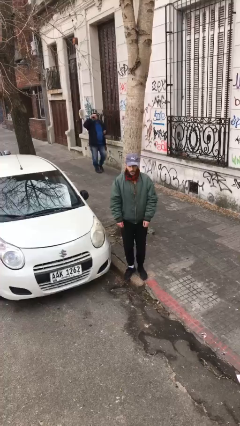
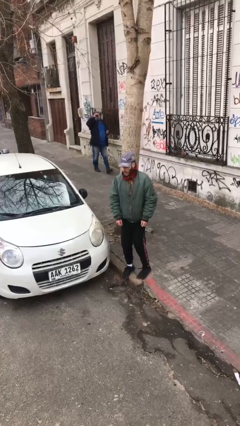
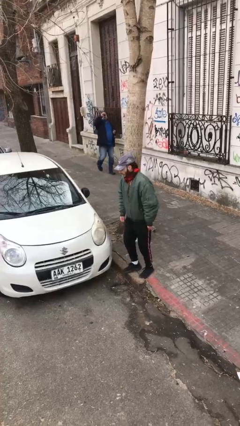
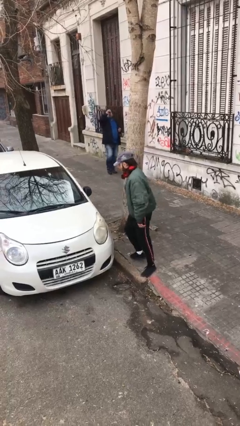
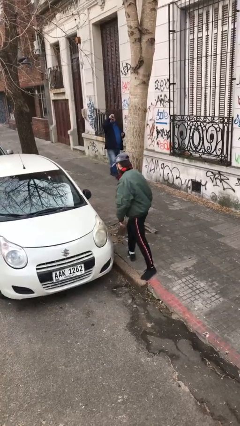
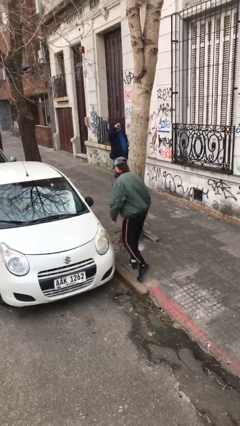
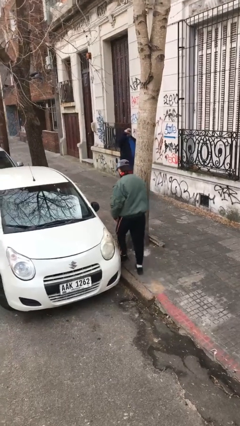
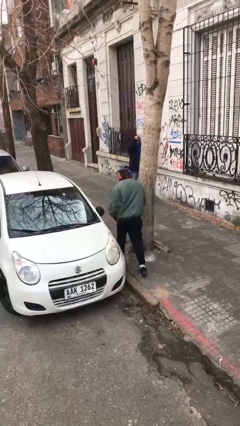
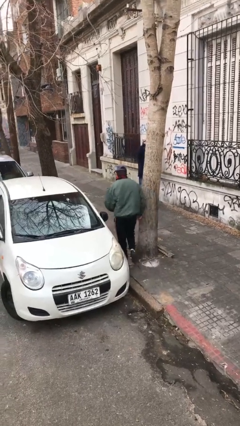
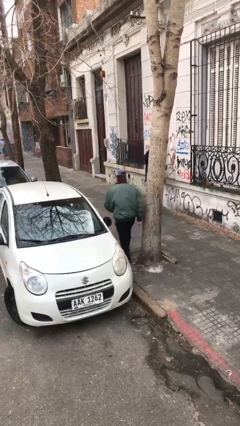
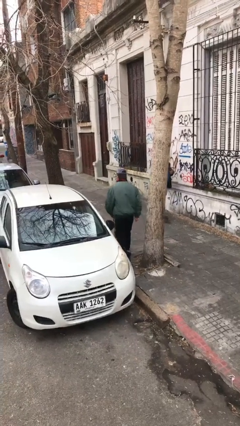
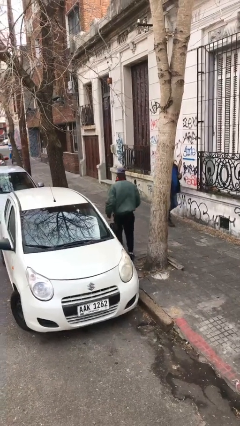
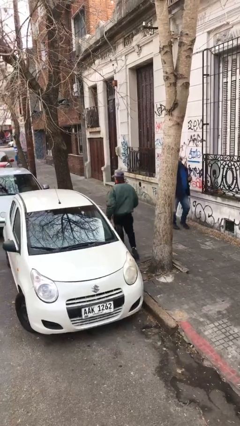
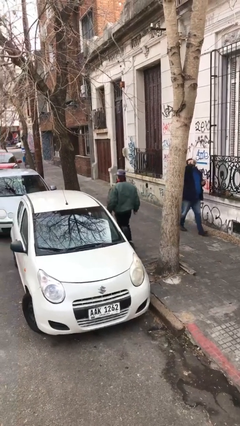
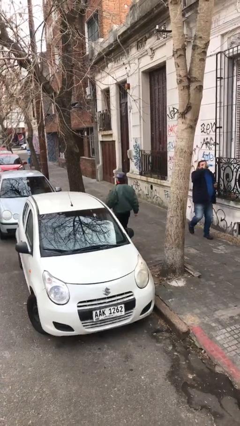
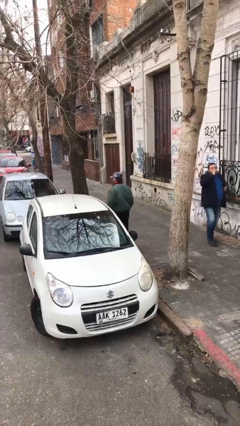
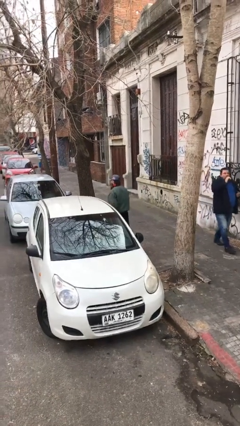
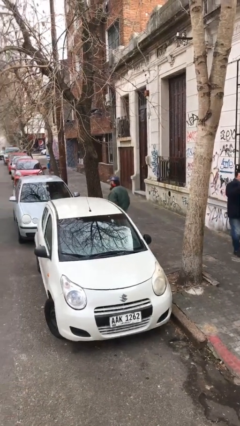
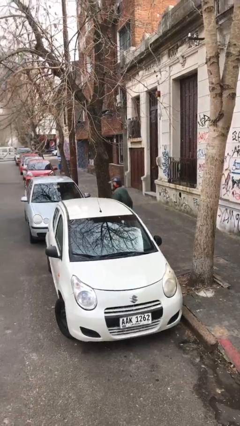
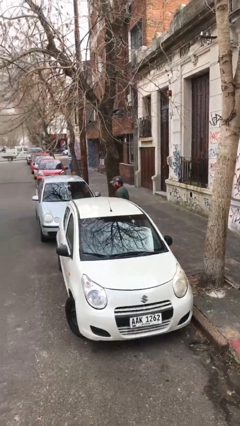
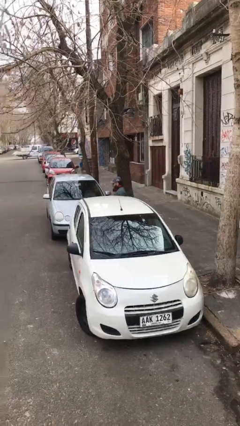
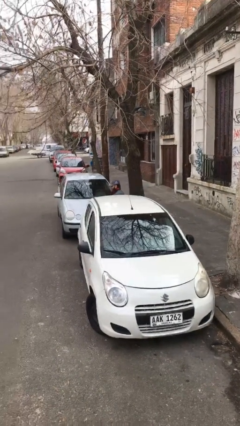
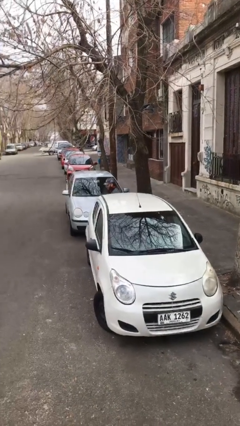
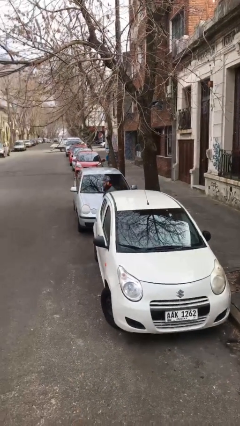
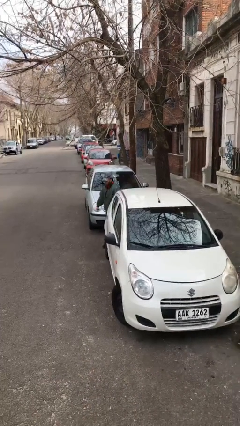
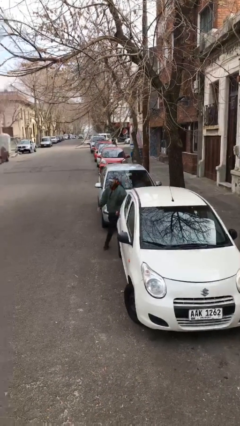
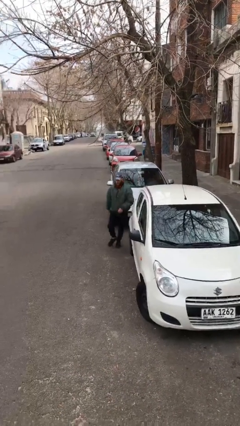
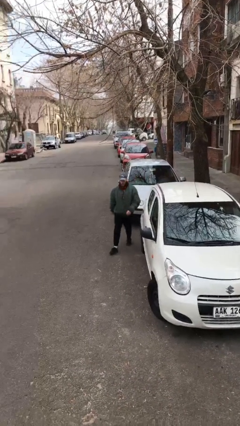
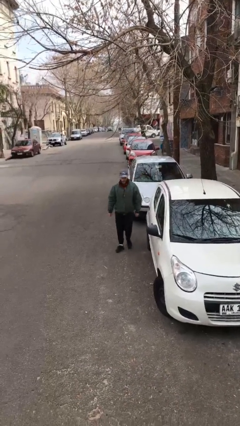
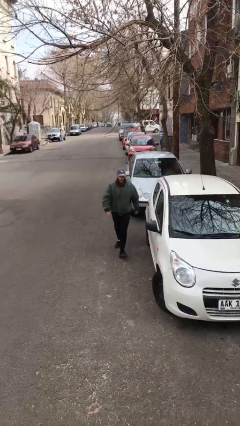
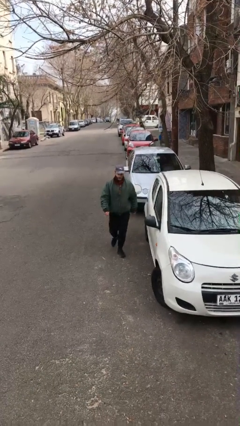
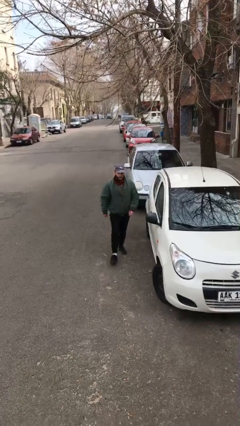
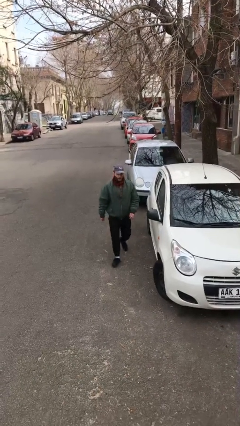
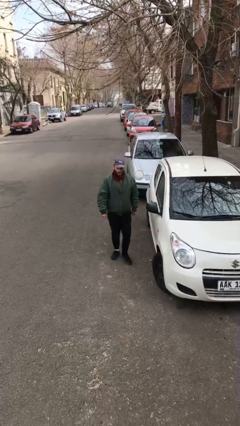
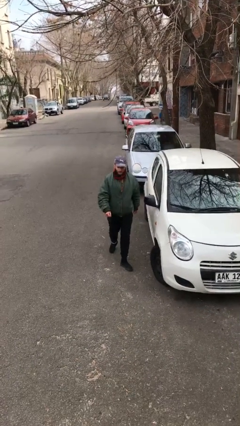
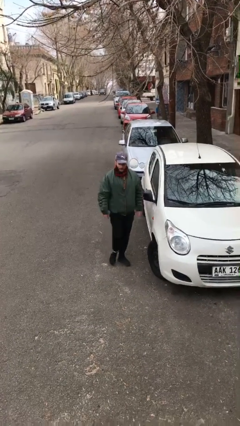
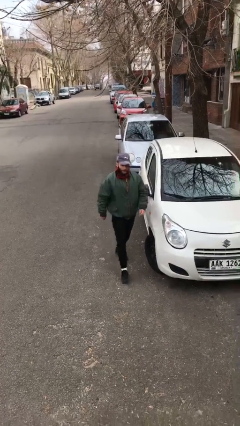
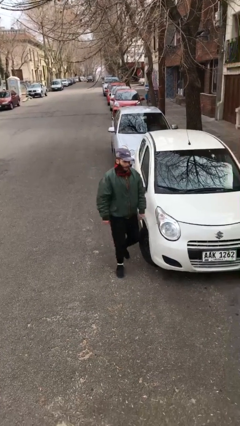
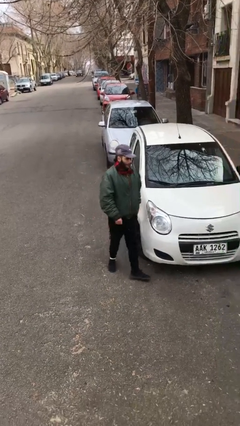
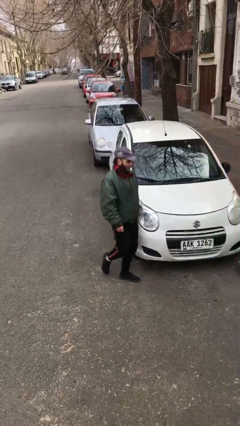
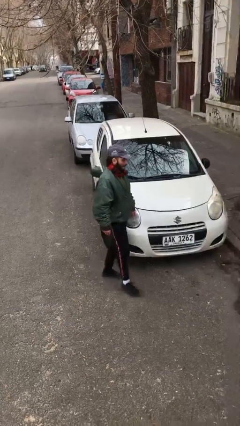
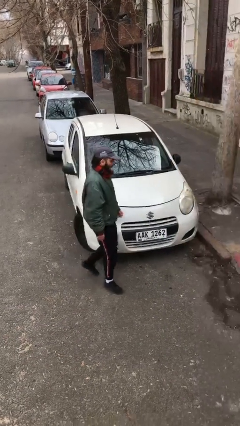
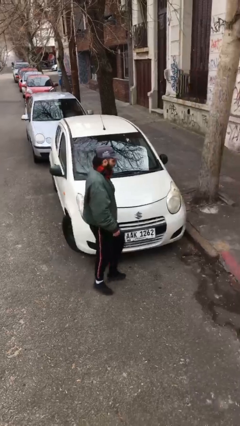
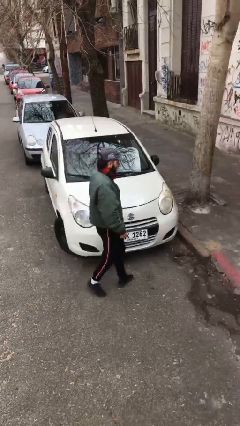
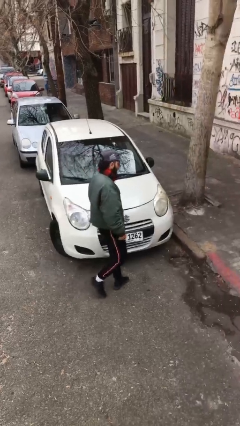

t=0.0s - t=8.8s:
person walks around car

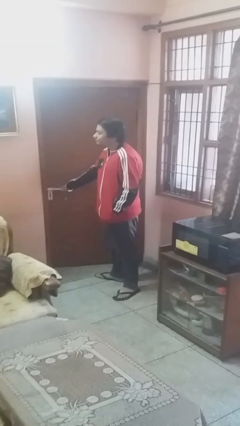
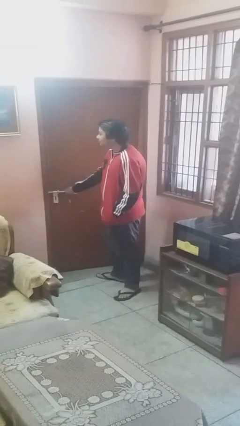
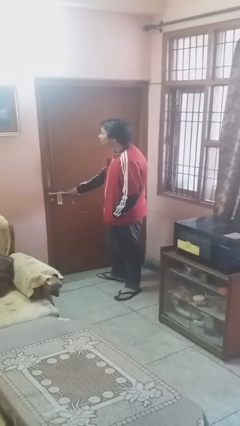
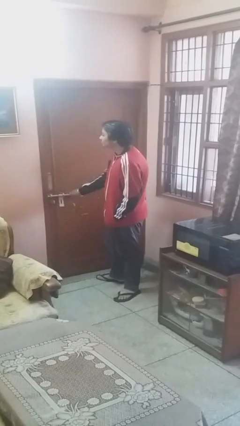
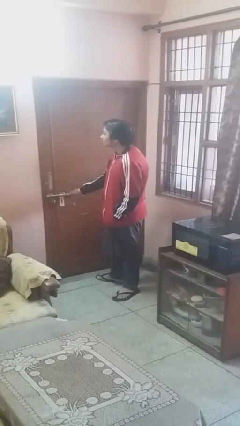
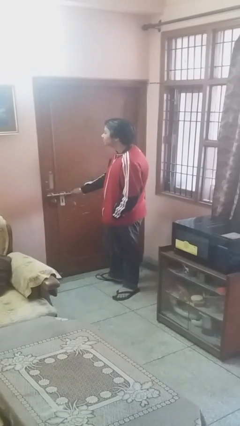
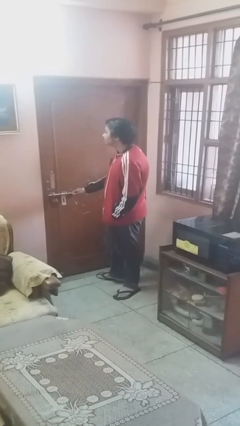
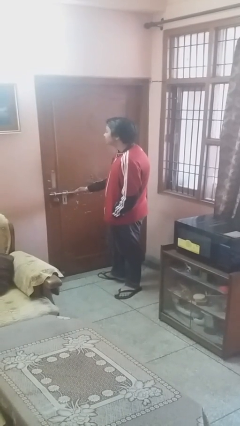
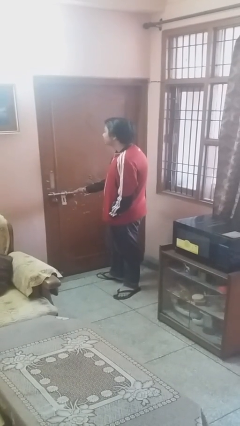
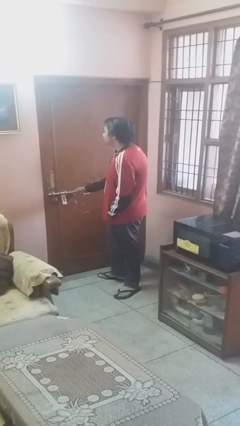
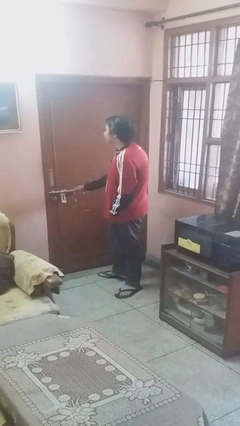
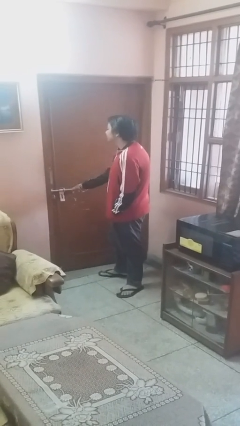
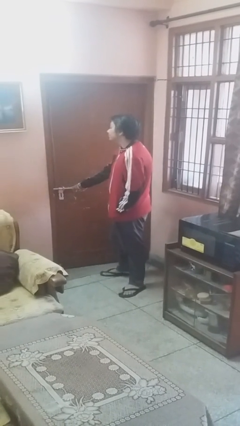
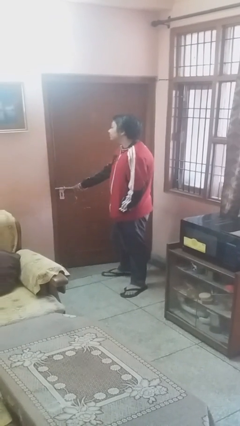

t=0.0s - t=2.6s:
person closes facility door

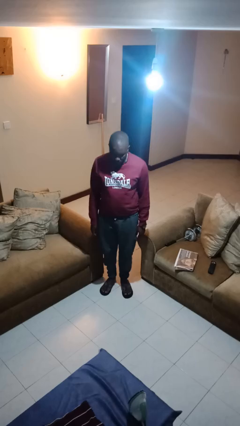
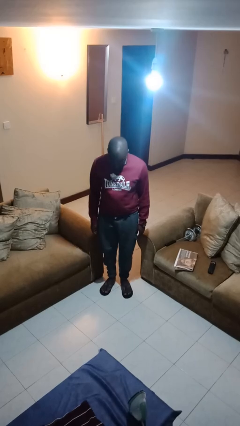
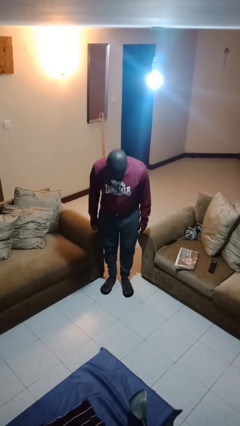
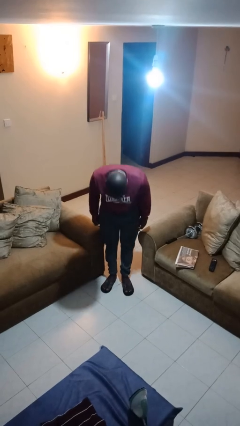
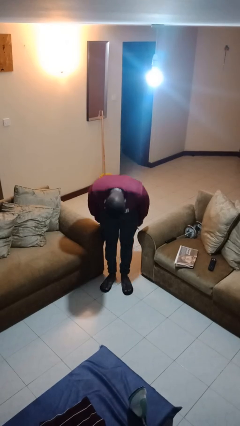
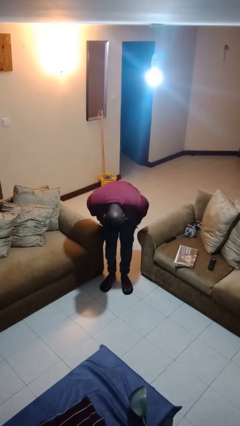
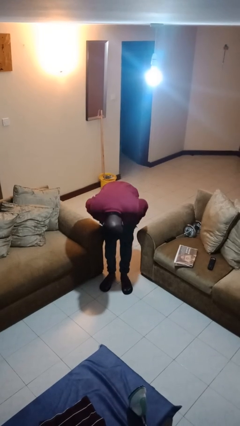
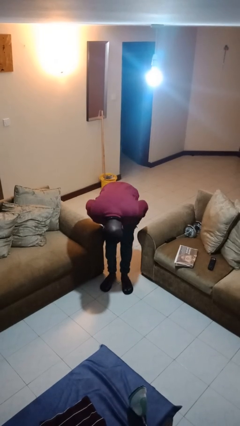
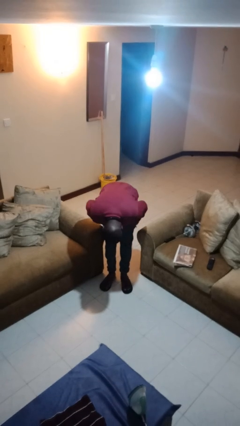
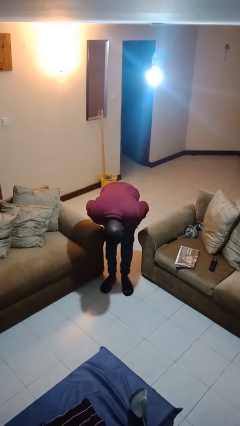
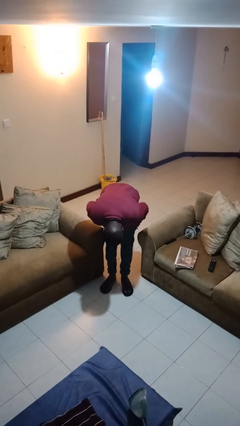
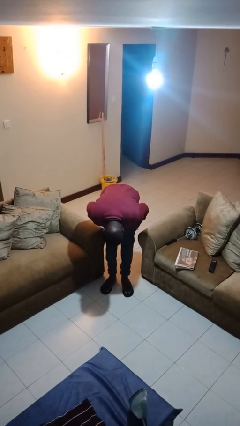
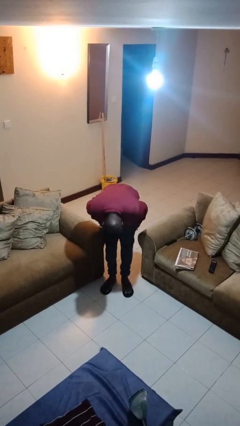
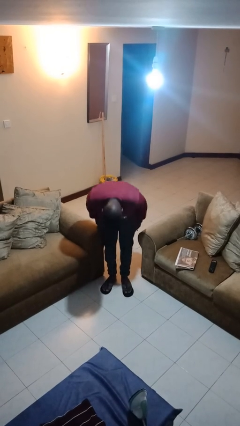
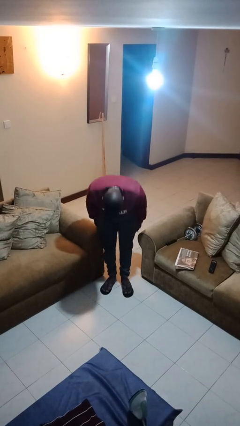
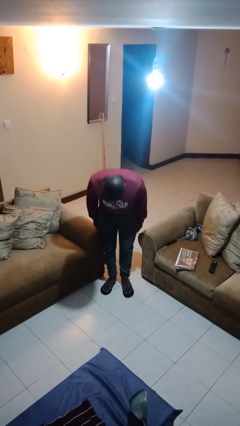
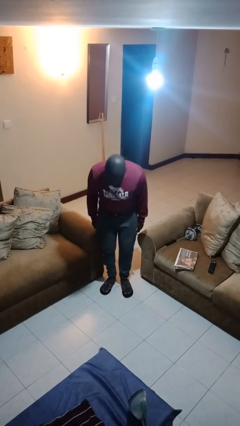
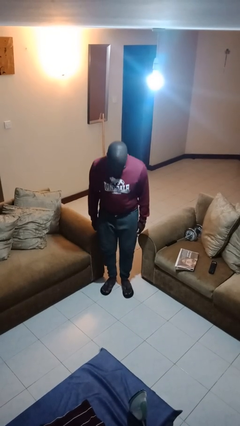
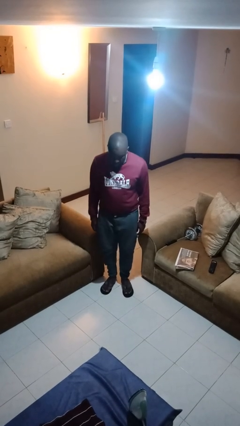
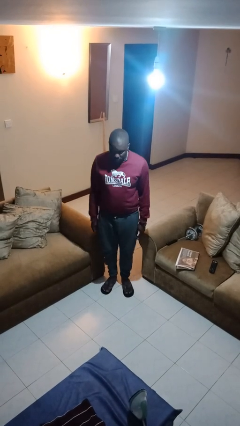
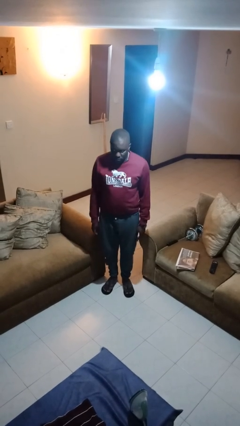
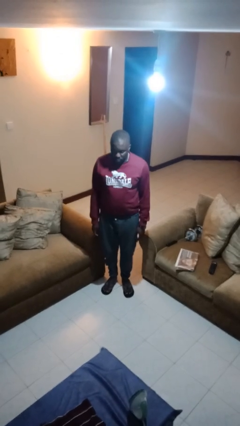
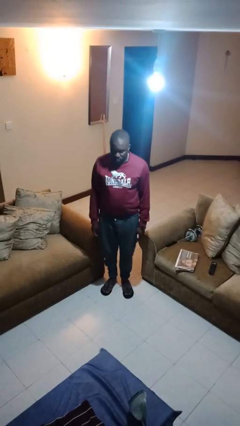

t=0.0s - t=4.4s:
person bows

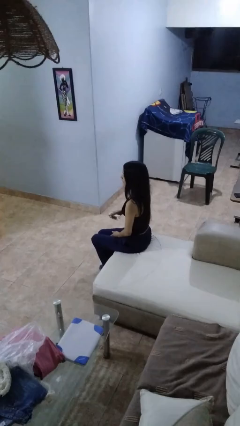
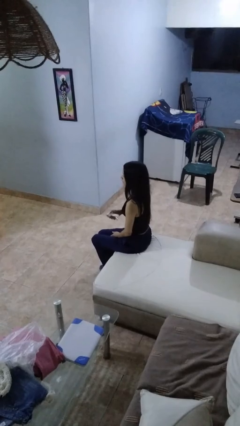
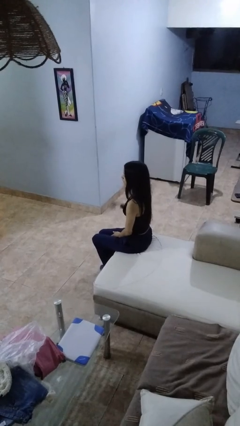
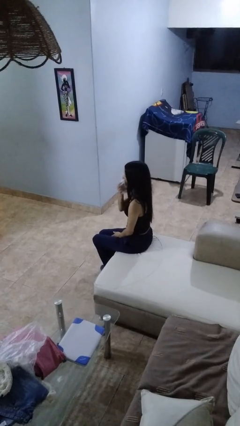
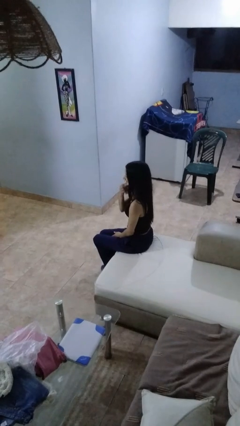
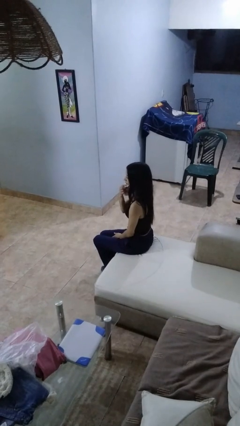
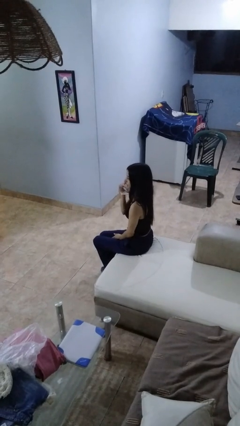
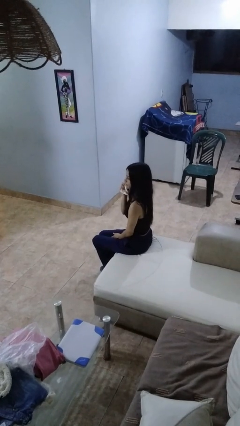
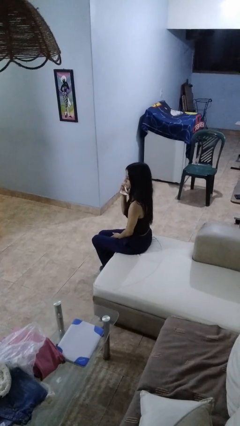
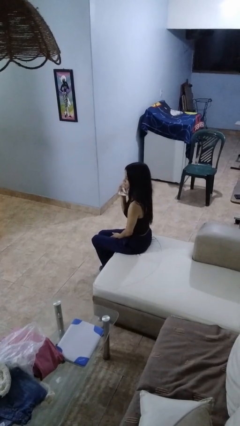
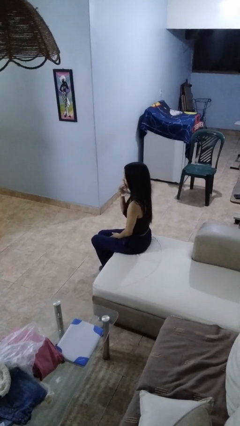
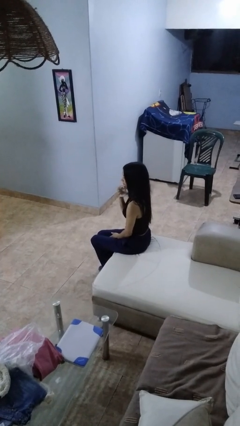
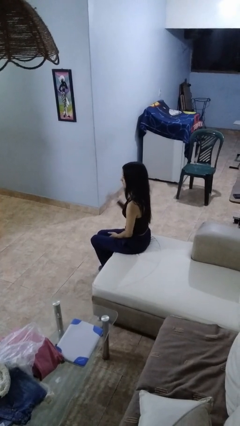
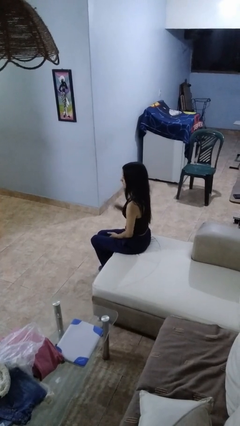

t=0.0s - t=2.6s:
person wipes mouth with napkin
